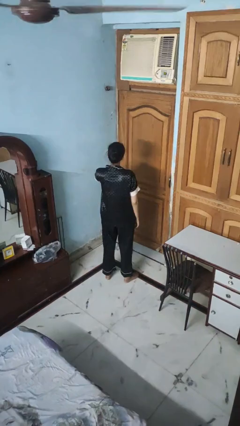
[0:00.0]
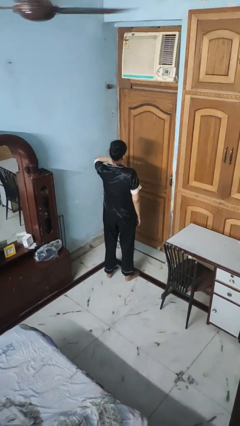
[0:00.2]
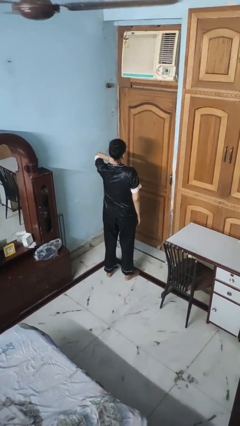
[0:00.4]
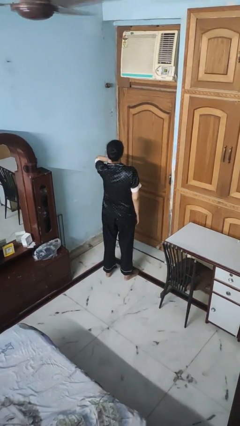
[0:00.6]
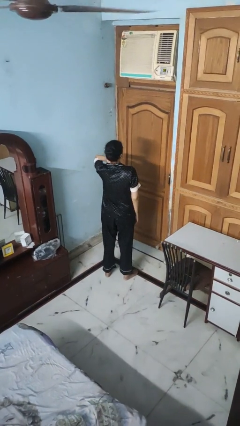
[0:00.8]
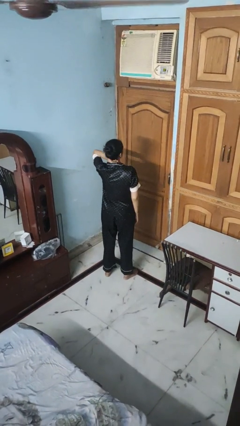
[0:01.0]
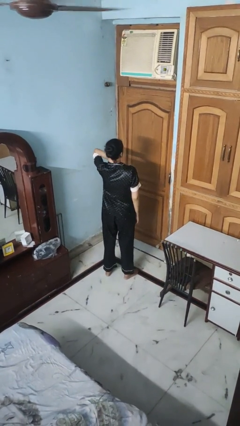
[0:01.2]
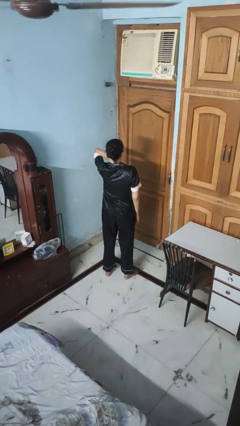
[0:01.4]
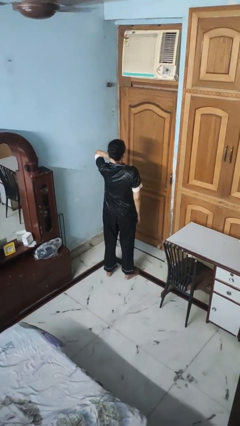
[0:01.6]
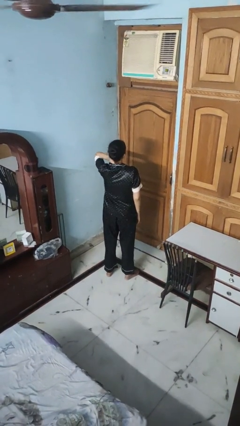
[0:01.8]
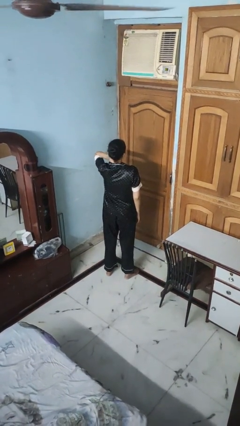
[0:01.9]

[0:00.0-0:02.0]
person rubs neck

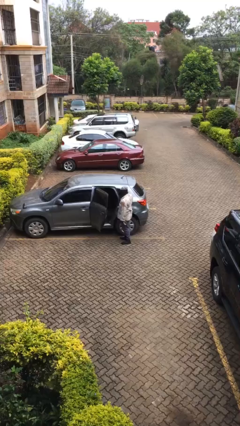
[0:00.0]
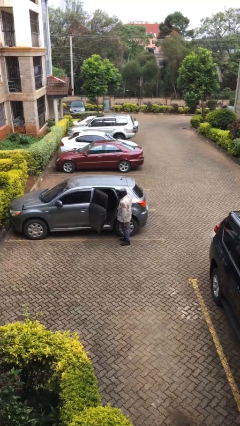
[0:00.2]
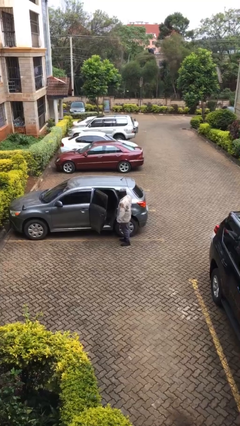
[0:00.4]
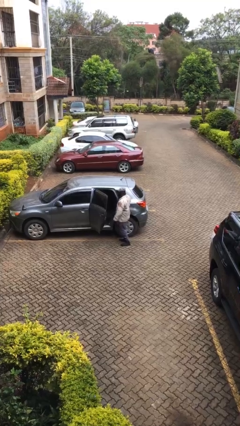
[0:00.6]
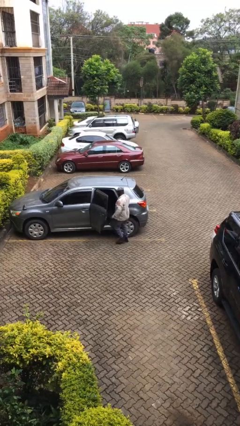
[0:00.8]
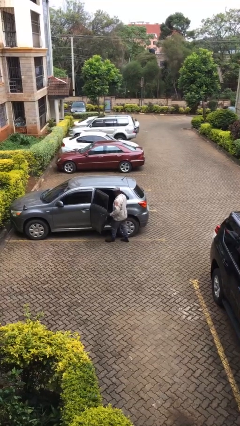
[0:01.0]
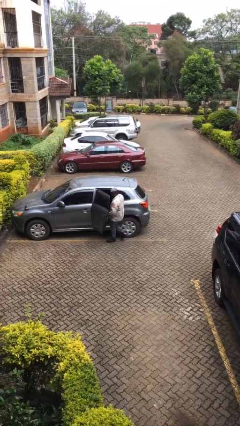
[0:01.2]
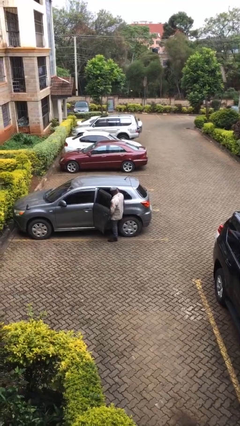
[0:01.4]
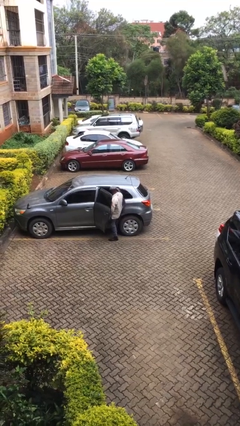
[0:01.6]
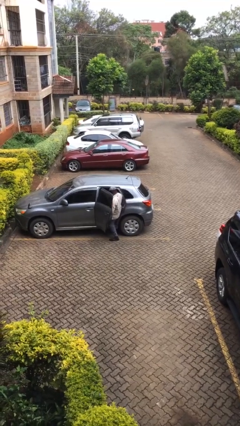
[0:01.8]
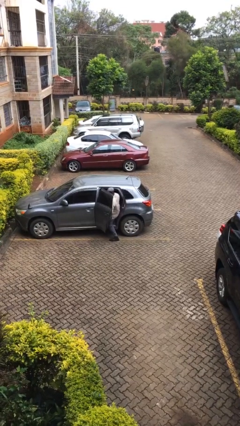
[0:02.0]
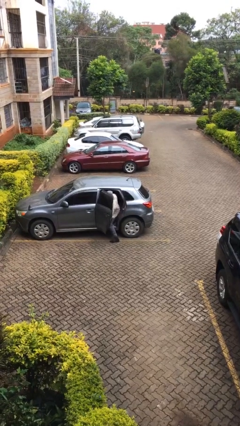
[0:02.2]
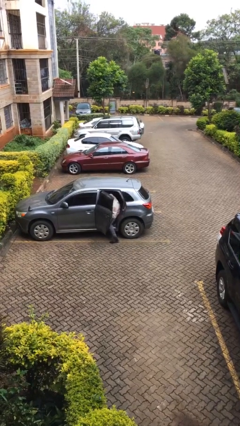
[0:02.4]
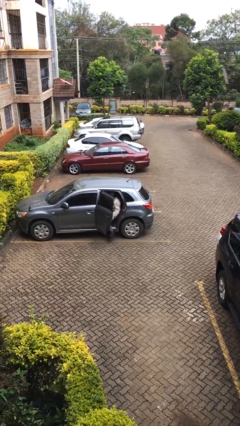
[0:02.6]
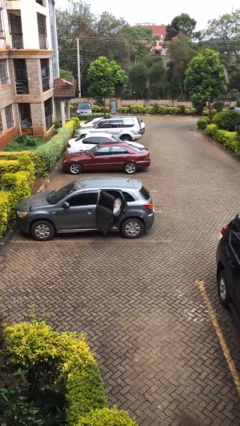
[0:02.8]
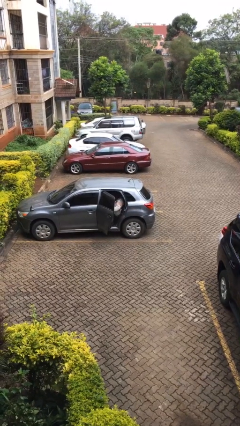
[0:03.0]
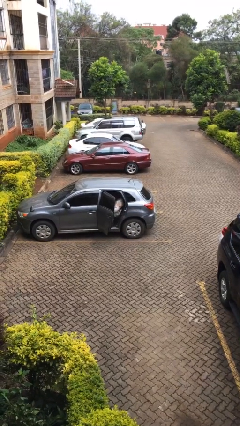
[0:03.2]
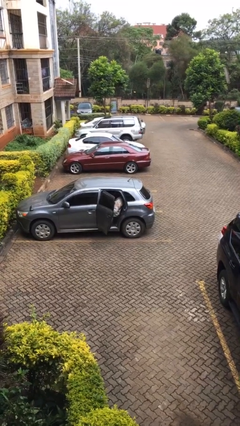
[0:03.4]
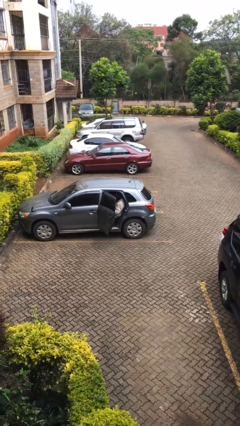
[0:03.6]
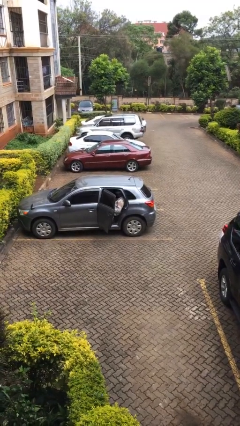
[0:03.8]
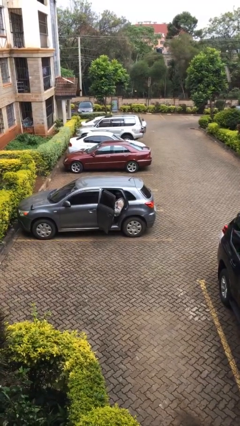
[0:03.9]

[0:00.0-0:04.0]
person enters car

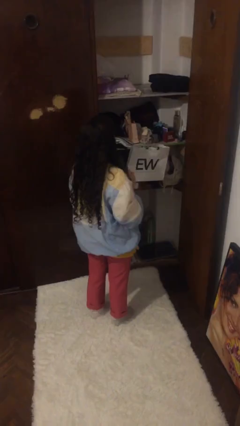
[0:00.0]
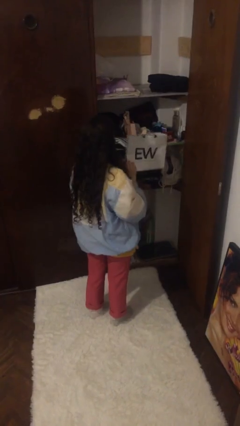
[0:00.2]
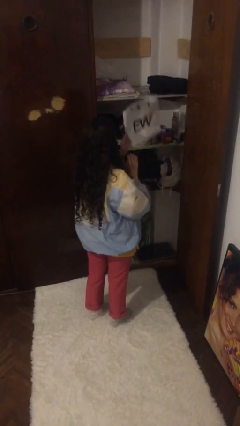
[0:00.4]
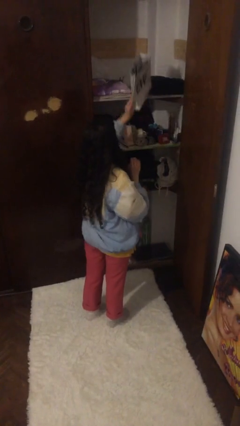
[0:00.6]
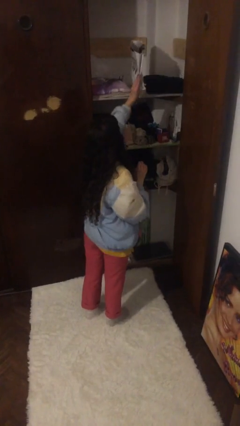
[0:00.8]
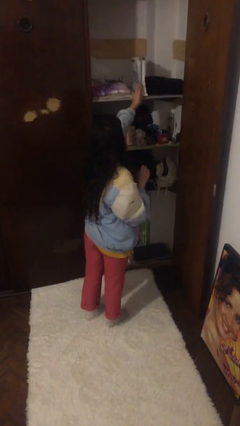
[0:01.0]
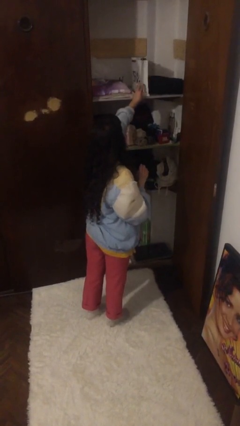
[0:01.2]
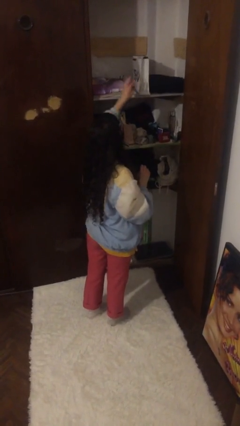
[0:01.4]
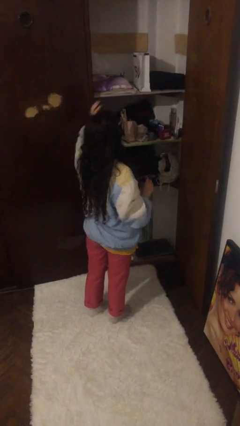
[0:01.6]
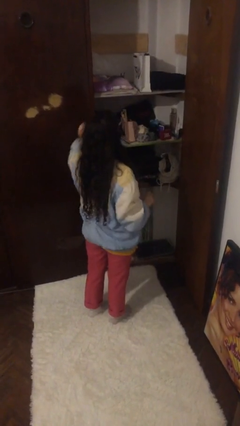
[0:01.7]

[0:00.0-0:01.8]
person puts down object on shelf

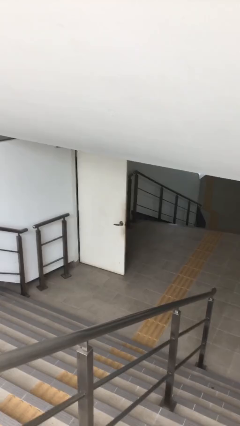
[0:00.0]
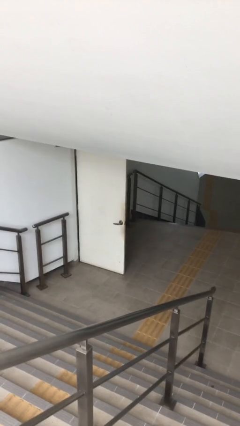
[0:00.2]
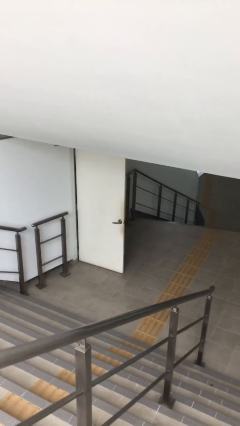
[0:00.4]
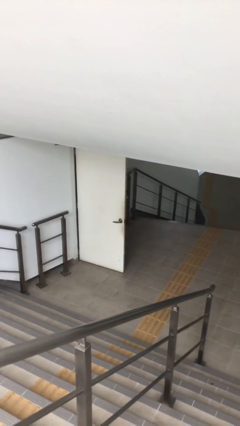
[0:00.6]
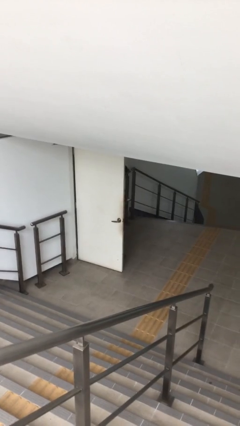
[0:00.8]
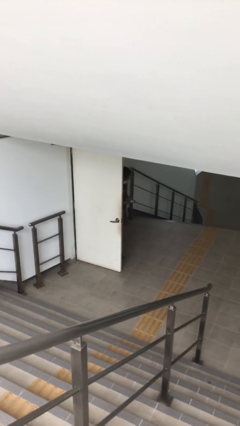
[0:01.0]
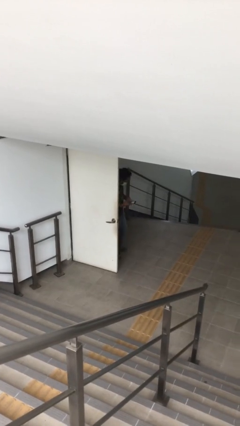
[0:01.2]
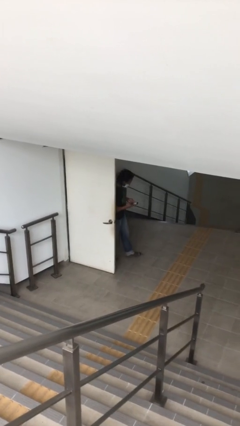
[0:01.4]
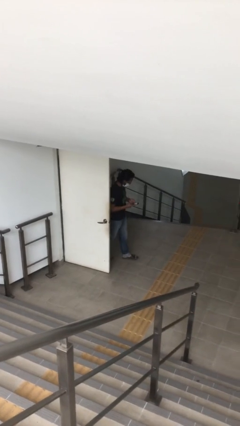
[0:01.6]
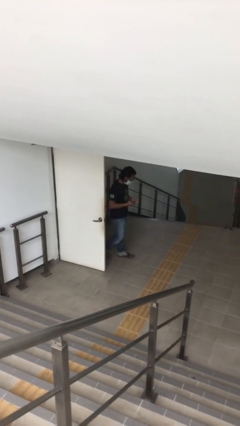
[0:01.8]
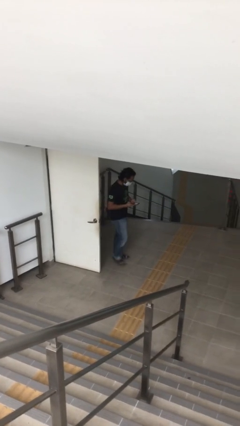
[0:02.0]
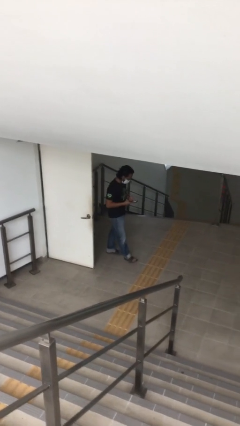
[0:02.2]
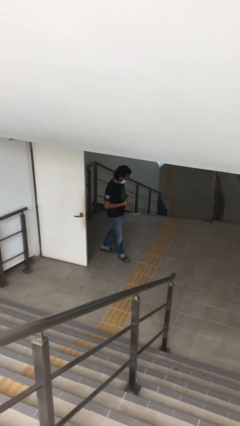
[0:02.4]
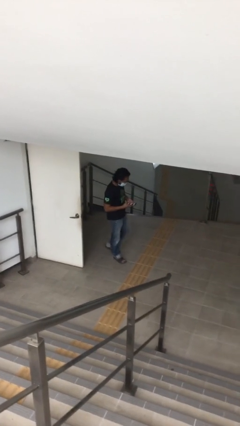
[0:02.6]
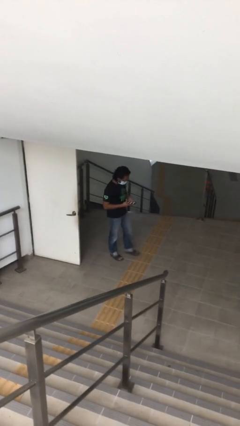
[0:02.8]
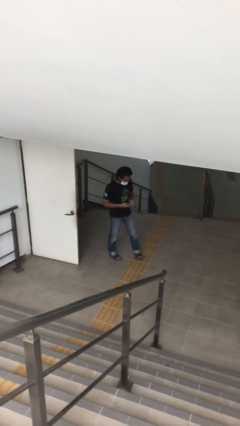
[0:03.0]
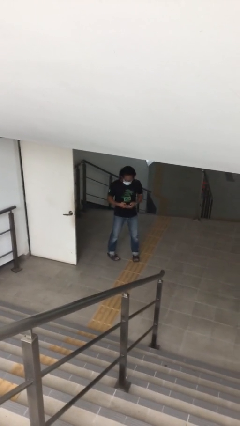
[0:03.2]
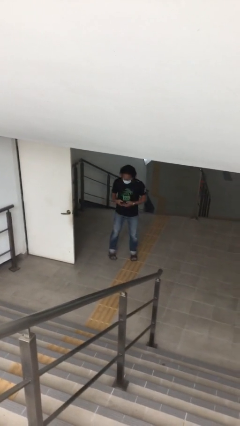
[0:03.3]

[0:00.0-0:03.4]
person enters scene through structure

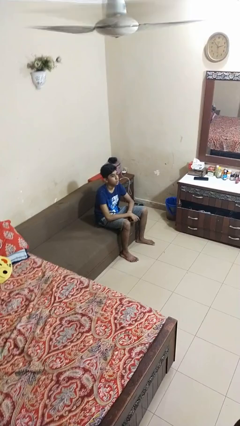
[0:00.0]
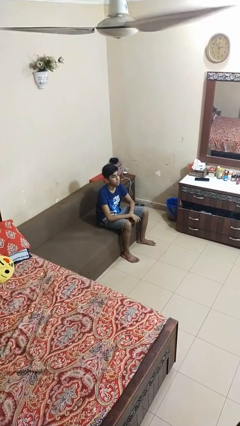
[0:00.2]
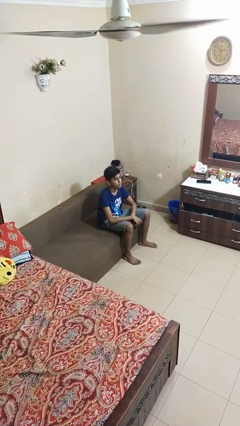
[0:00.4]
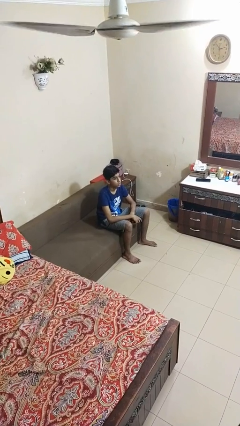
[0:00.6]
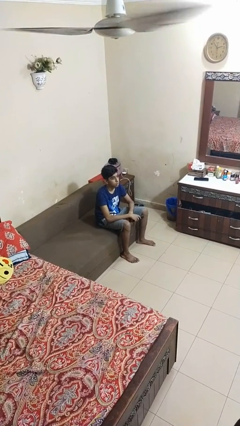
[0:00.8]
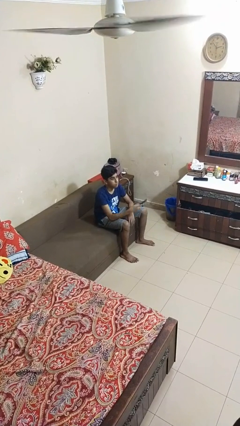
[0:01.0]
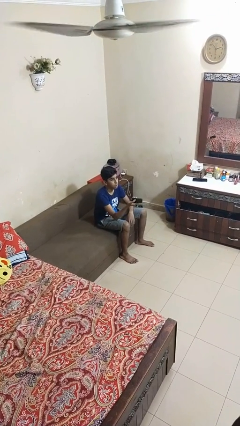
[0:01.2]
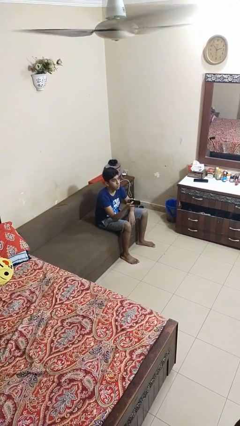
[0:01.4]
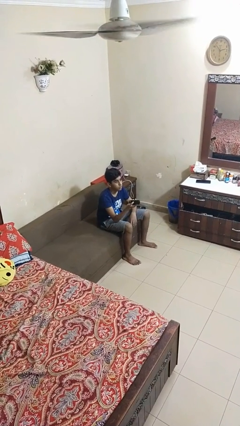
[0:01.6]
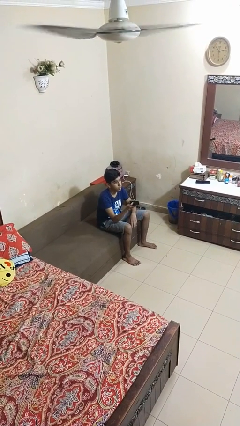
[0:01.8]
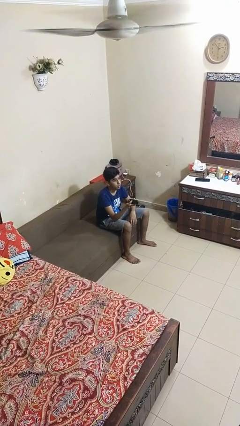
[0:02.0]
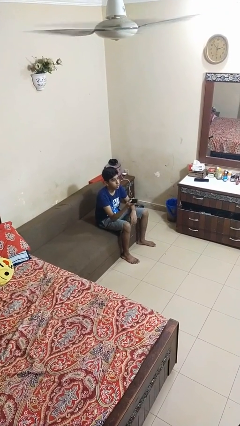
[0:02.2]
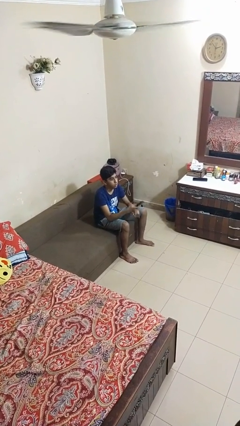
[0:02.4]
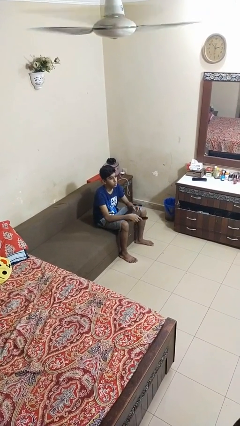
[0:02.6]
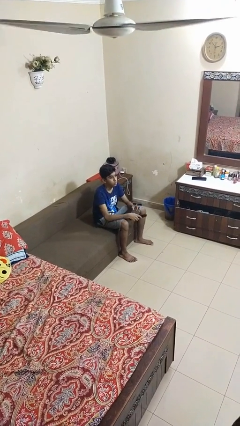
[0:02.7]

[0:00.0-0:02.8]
person uses television remote

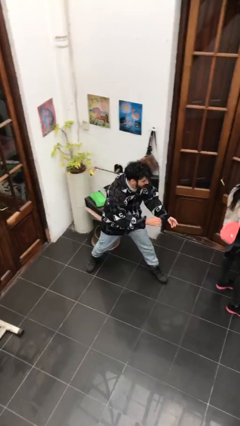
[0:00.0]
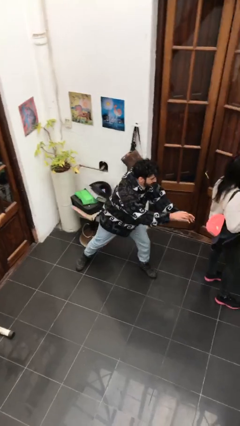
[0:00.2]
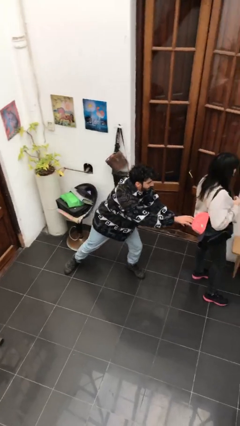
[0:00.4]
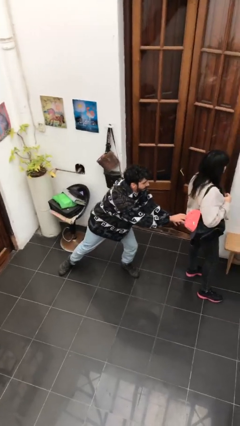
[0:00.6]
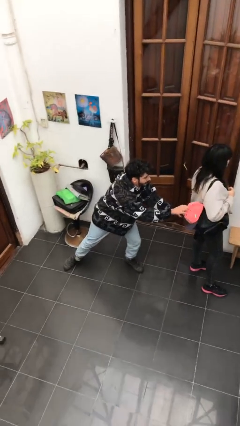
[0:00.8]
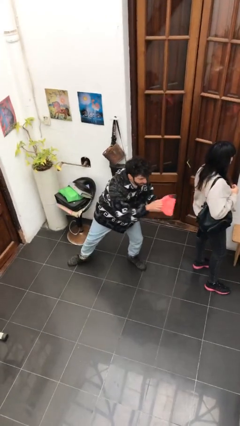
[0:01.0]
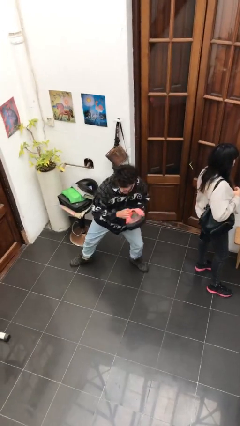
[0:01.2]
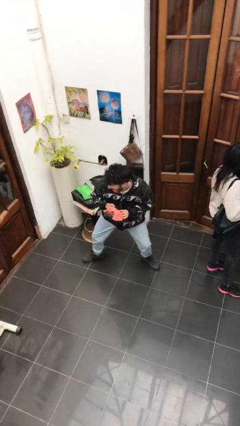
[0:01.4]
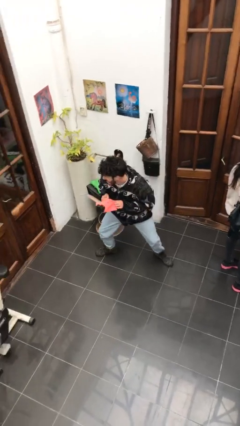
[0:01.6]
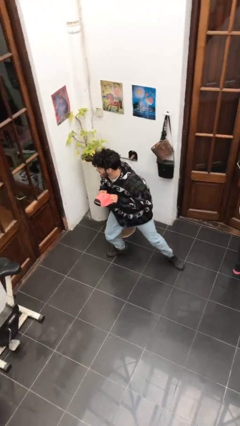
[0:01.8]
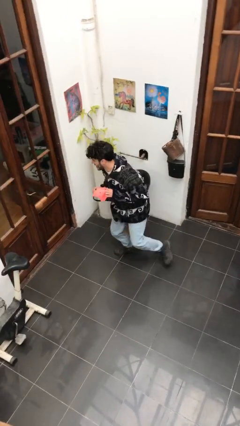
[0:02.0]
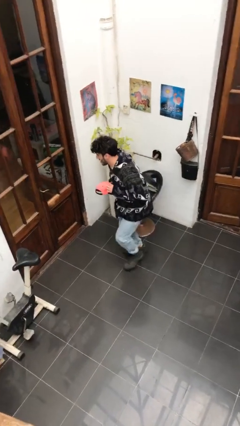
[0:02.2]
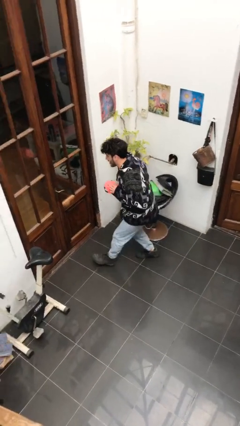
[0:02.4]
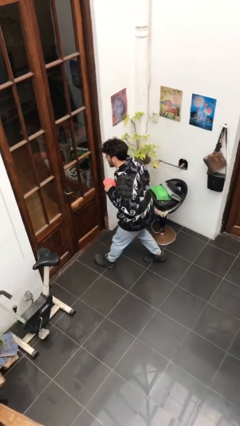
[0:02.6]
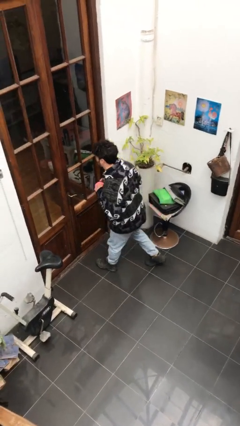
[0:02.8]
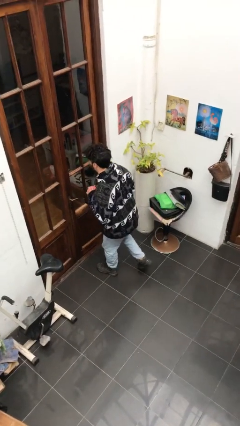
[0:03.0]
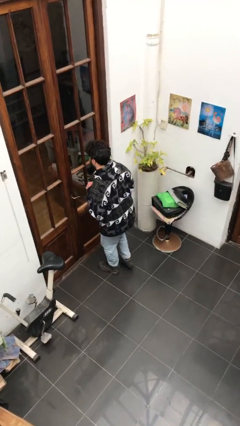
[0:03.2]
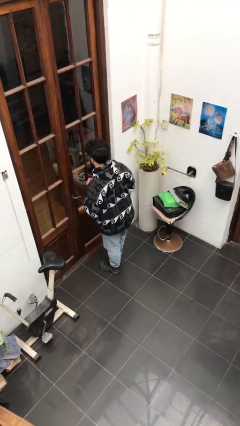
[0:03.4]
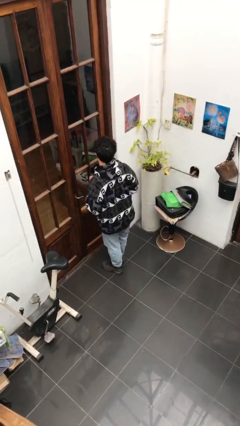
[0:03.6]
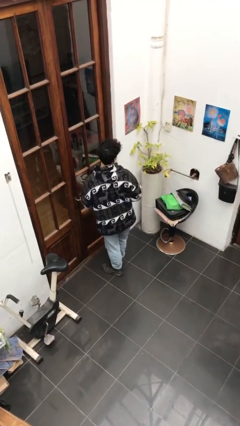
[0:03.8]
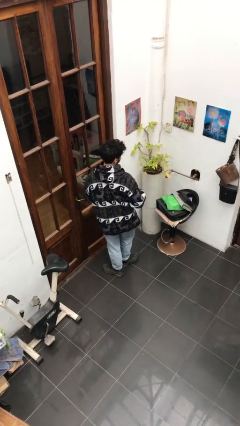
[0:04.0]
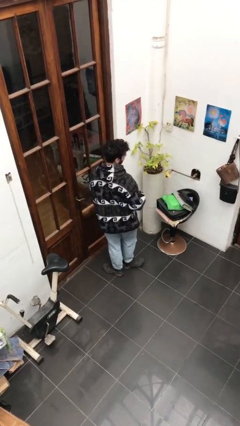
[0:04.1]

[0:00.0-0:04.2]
person steals object from person
